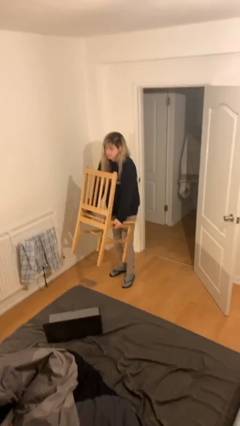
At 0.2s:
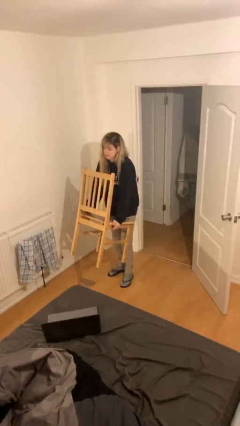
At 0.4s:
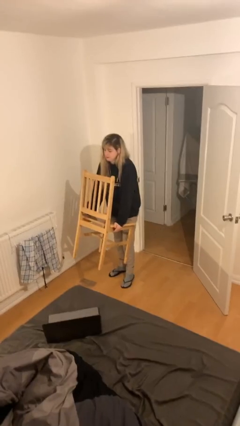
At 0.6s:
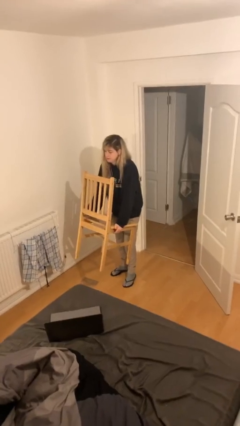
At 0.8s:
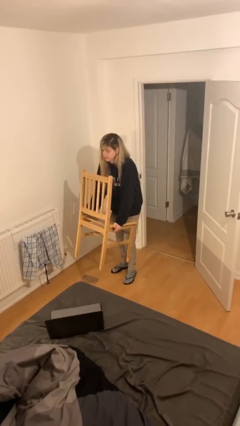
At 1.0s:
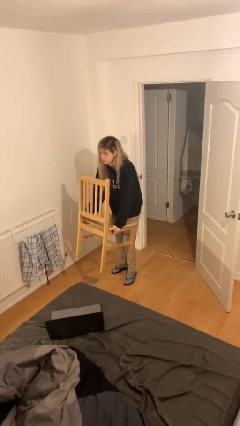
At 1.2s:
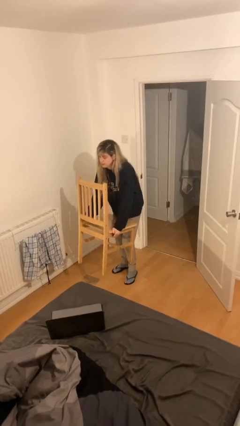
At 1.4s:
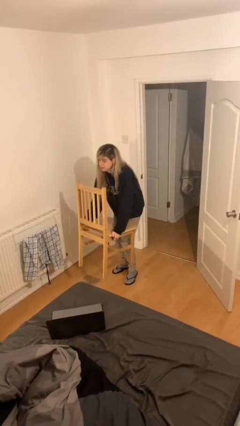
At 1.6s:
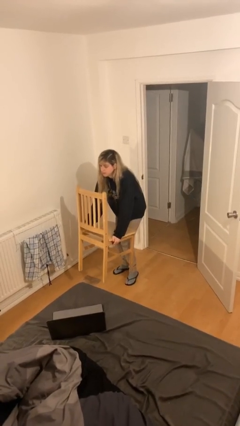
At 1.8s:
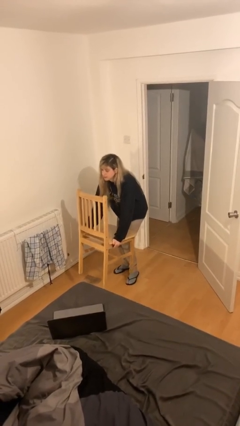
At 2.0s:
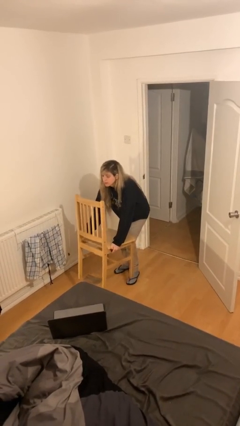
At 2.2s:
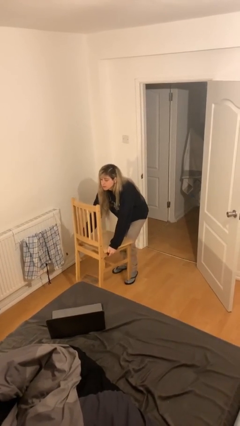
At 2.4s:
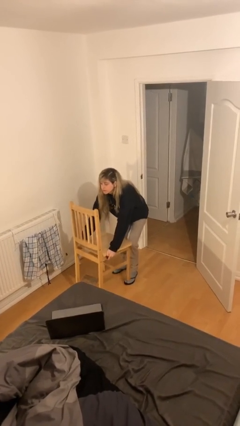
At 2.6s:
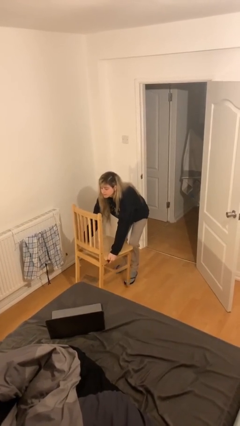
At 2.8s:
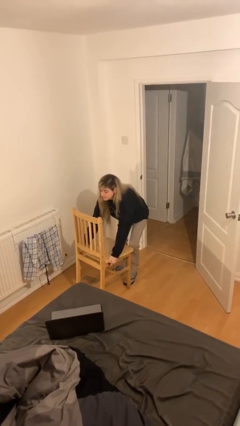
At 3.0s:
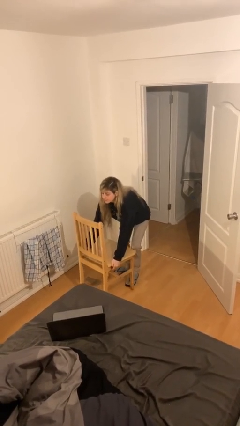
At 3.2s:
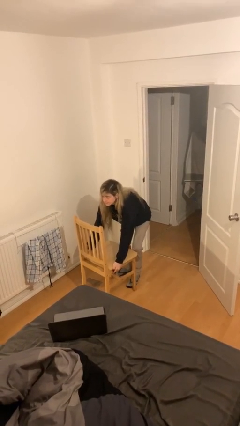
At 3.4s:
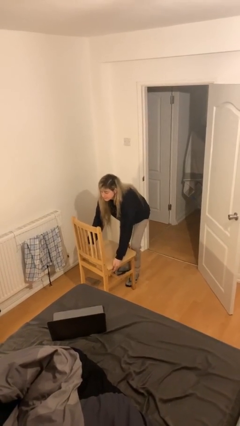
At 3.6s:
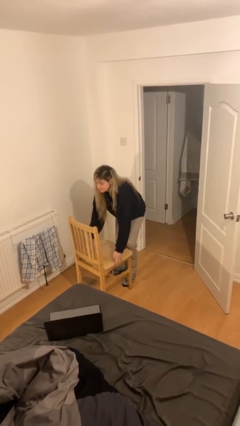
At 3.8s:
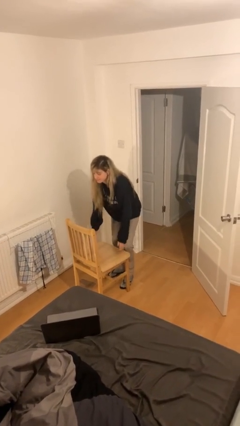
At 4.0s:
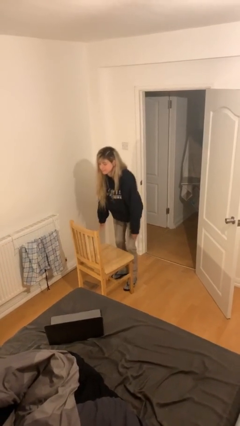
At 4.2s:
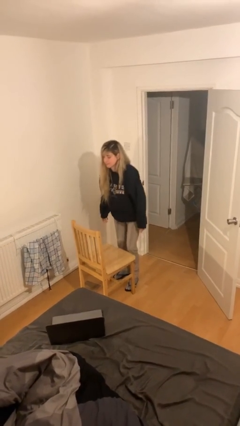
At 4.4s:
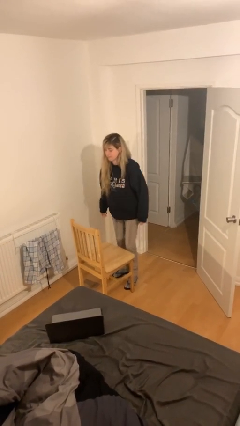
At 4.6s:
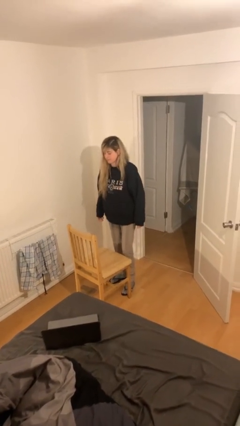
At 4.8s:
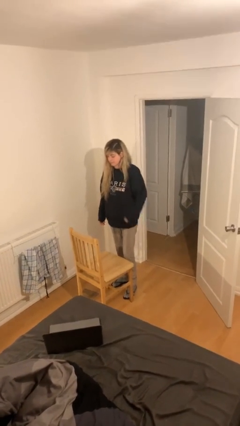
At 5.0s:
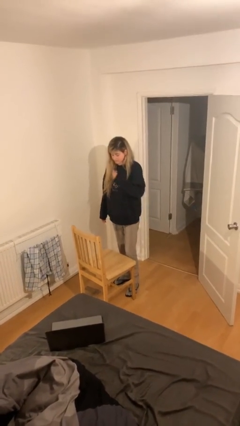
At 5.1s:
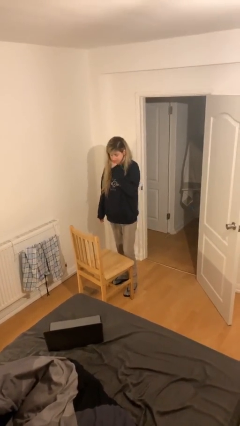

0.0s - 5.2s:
person puts down object on floor

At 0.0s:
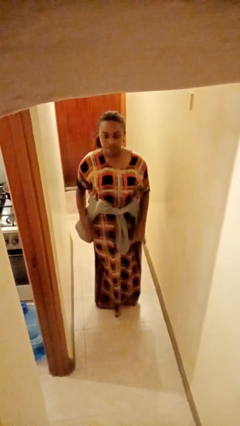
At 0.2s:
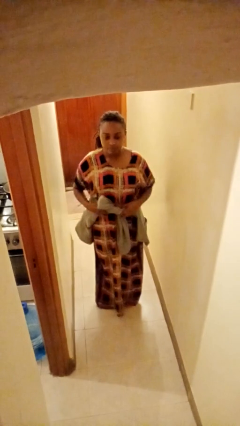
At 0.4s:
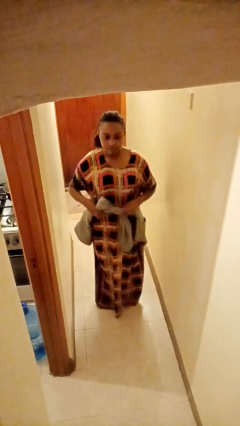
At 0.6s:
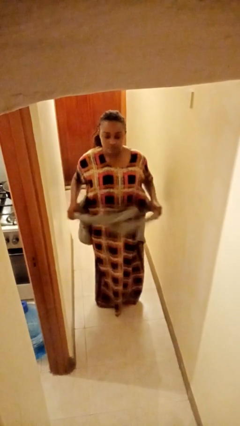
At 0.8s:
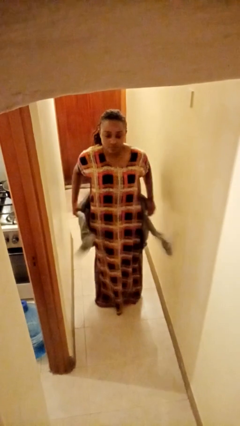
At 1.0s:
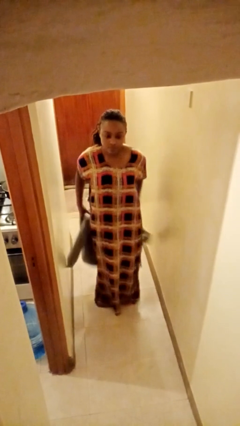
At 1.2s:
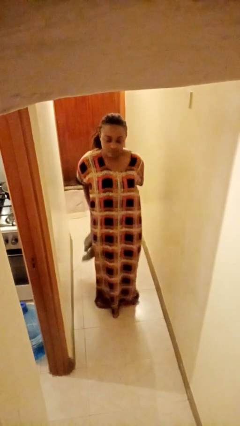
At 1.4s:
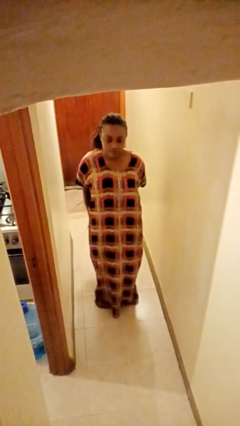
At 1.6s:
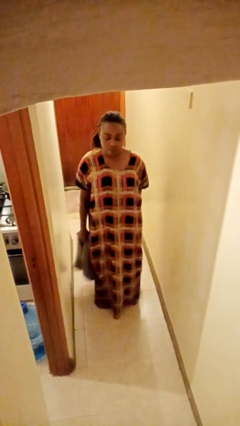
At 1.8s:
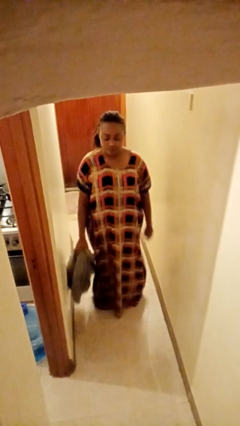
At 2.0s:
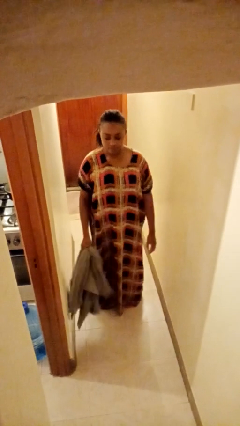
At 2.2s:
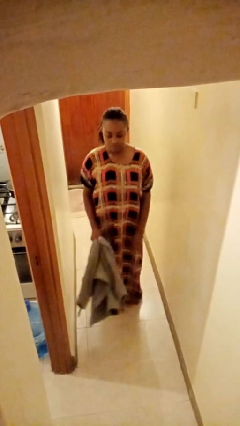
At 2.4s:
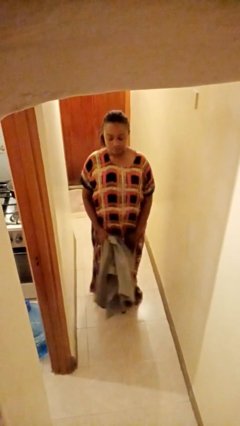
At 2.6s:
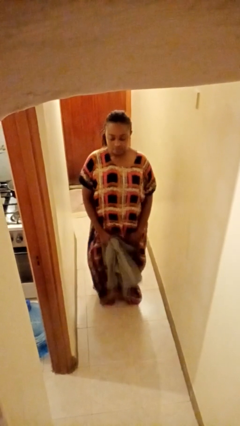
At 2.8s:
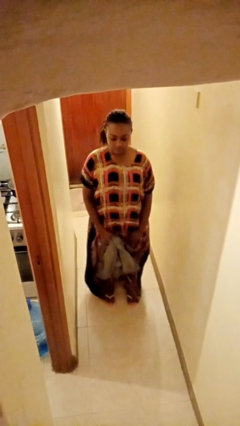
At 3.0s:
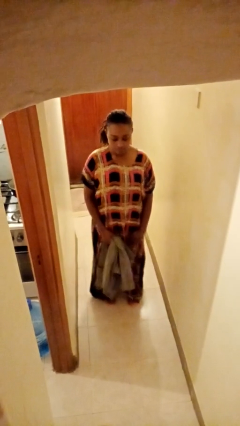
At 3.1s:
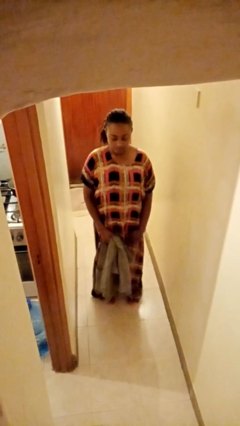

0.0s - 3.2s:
person unties jacket around waist

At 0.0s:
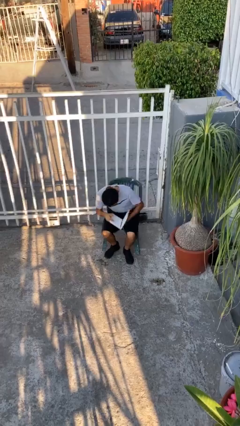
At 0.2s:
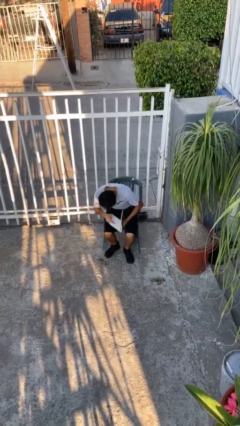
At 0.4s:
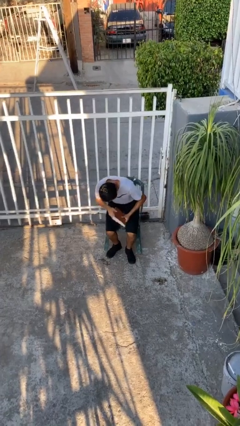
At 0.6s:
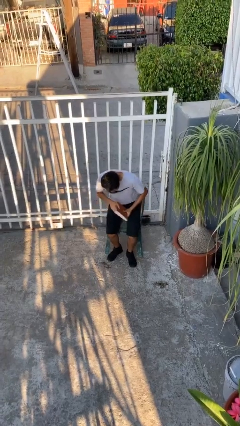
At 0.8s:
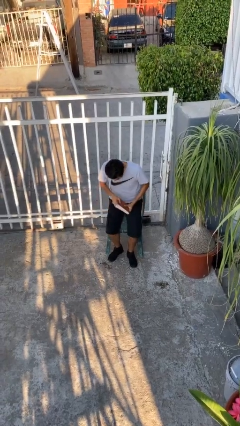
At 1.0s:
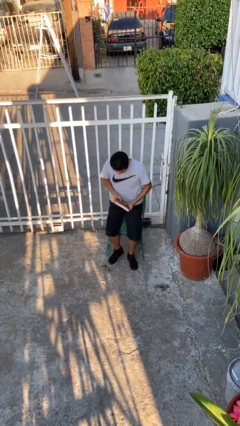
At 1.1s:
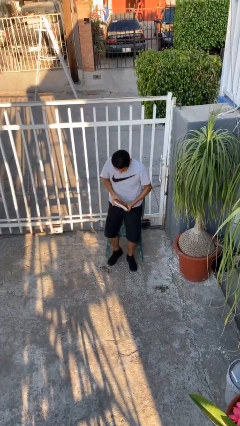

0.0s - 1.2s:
person stands up

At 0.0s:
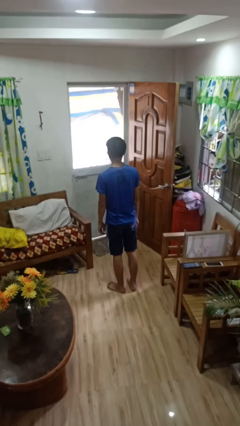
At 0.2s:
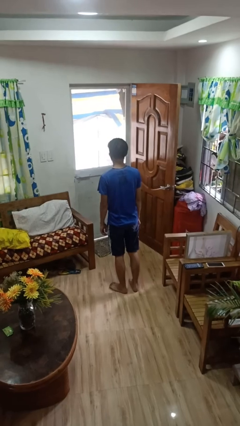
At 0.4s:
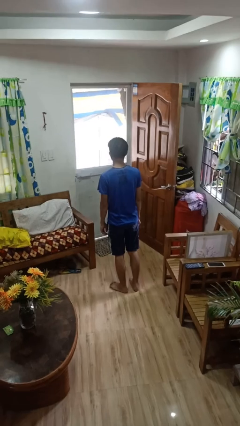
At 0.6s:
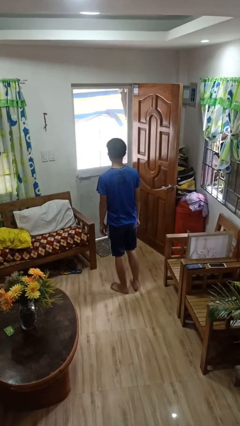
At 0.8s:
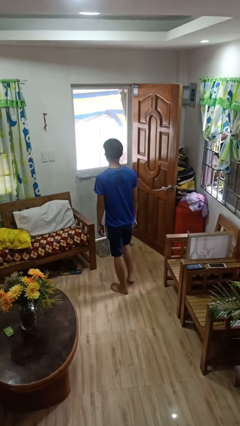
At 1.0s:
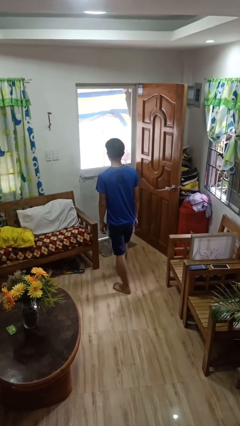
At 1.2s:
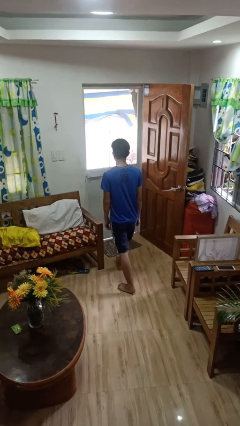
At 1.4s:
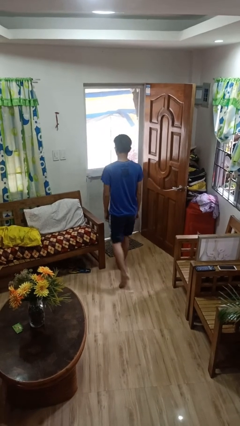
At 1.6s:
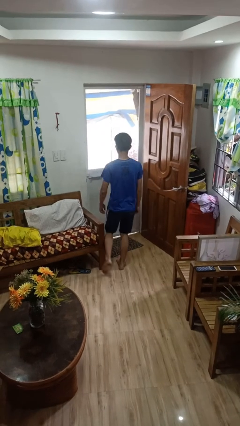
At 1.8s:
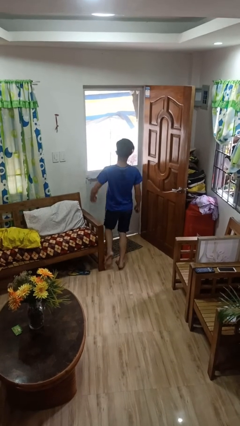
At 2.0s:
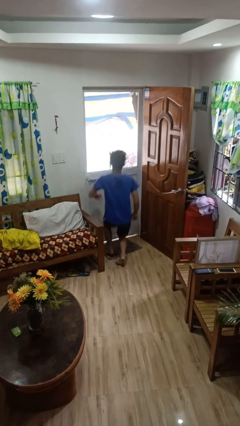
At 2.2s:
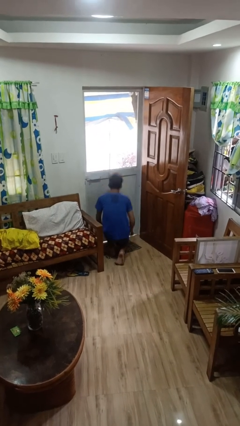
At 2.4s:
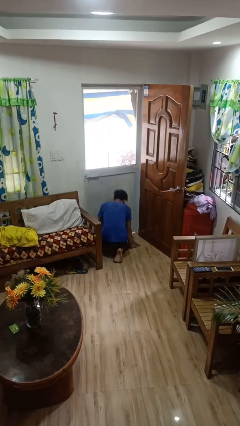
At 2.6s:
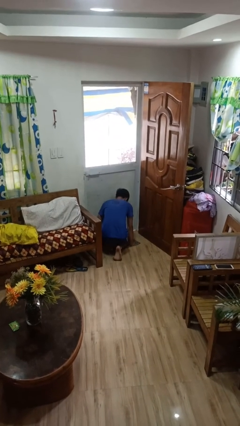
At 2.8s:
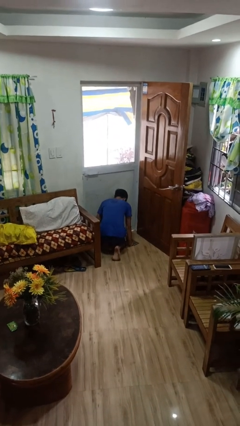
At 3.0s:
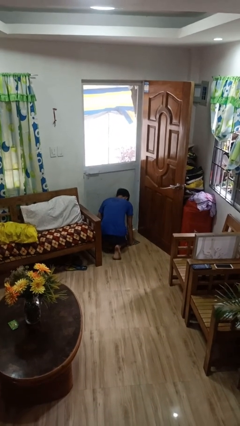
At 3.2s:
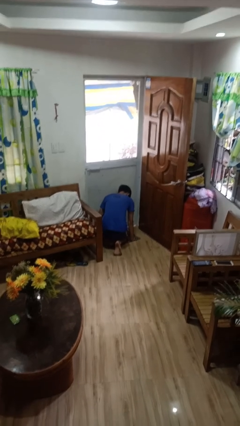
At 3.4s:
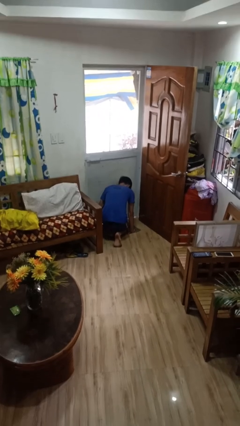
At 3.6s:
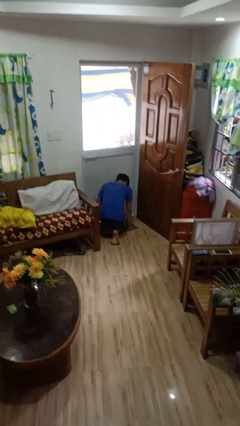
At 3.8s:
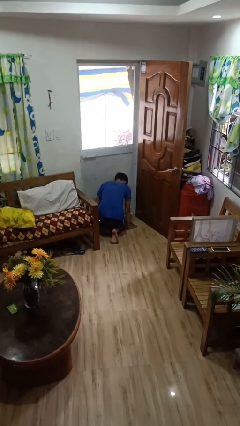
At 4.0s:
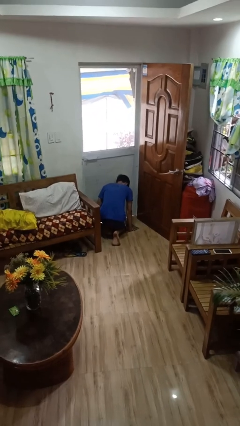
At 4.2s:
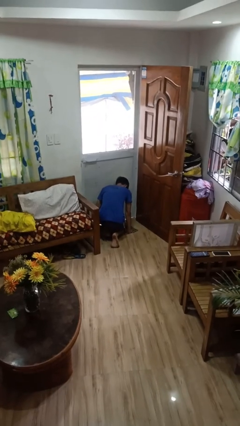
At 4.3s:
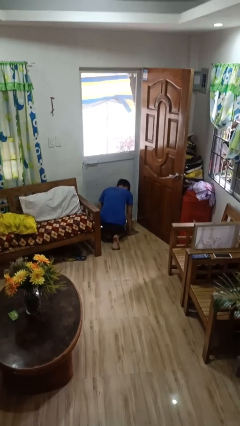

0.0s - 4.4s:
person trips on object on floor

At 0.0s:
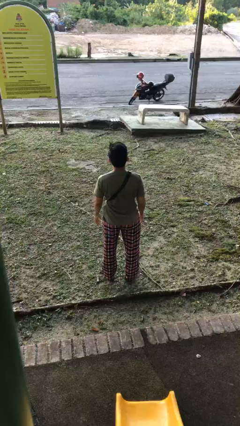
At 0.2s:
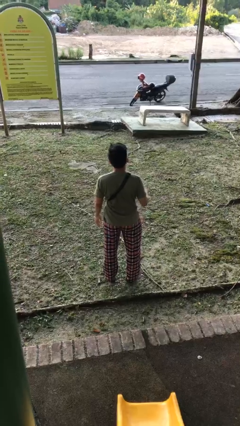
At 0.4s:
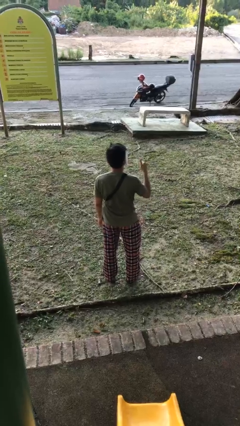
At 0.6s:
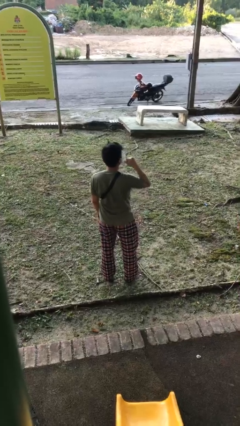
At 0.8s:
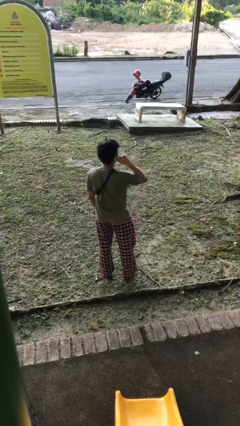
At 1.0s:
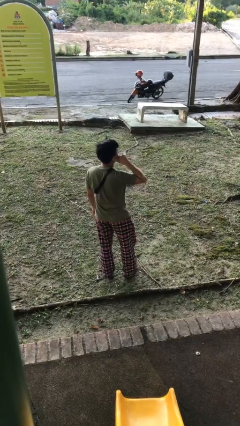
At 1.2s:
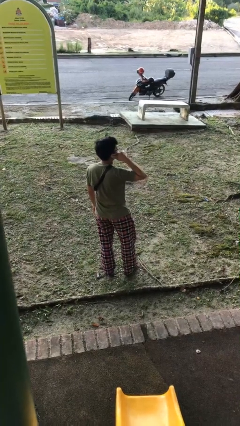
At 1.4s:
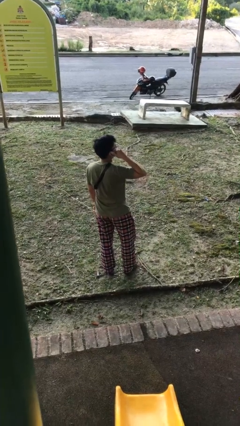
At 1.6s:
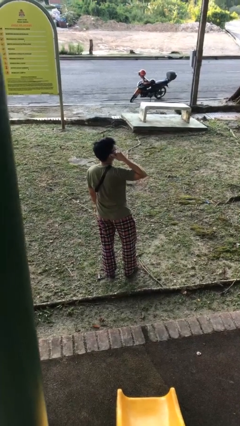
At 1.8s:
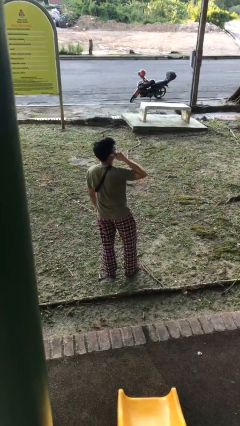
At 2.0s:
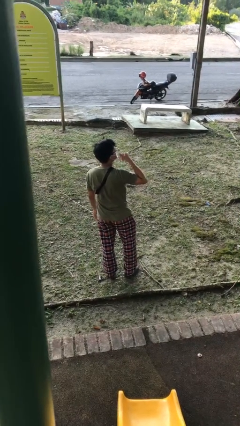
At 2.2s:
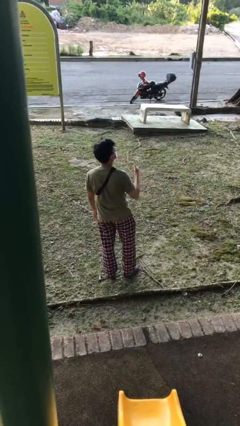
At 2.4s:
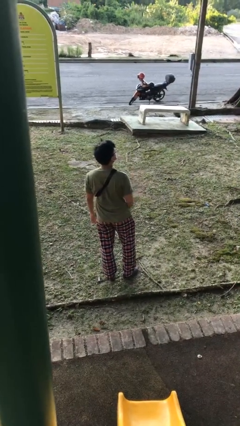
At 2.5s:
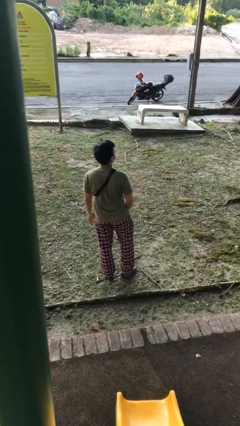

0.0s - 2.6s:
person gestures call me

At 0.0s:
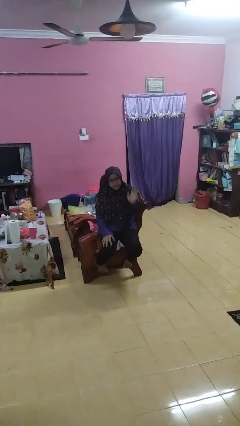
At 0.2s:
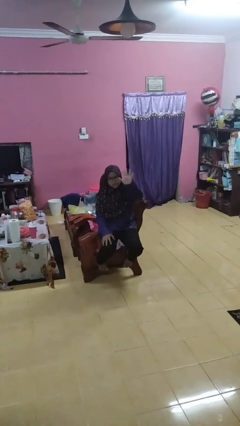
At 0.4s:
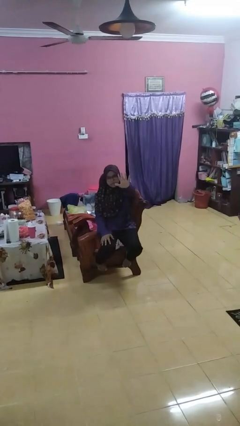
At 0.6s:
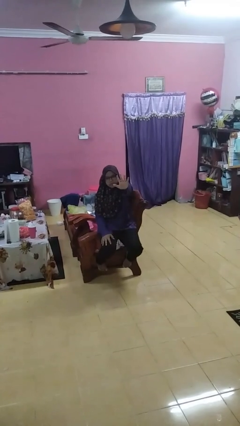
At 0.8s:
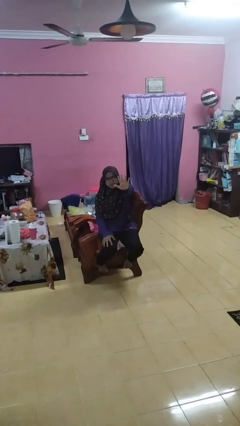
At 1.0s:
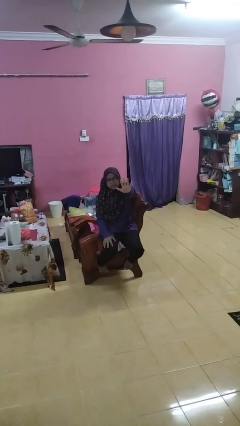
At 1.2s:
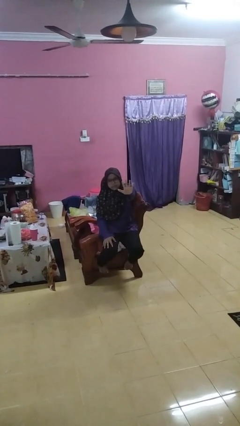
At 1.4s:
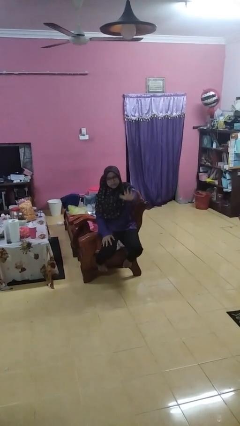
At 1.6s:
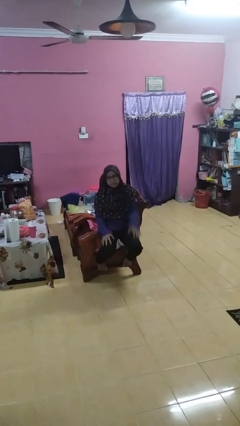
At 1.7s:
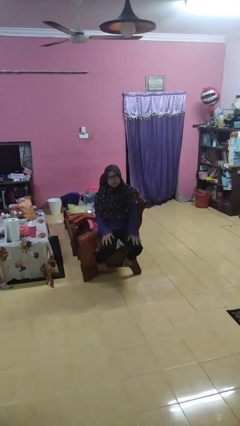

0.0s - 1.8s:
person gestures number five
